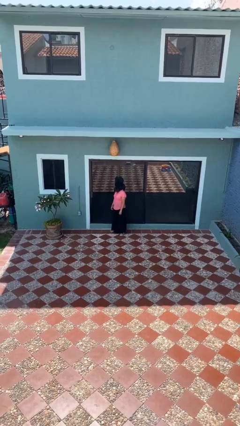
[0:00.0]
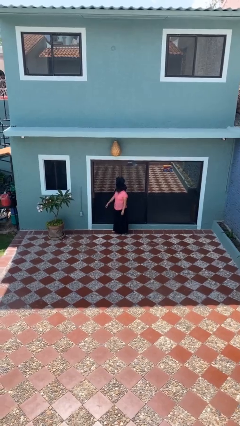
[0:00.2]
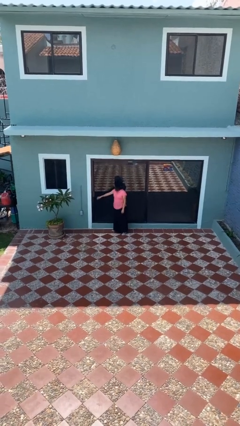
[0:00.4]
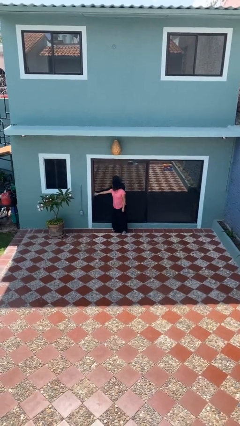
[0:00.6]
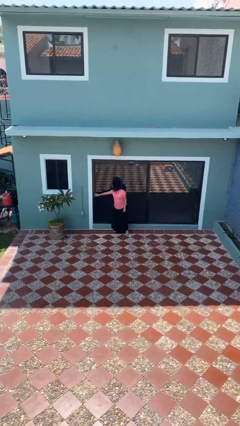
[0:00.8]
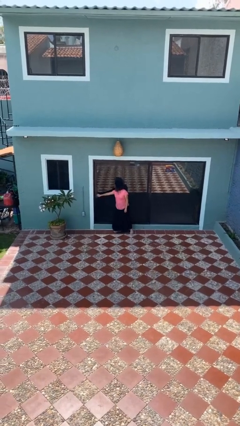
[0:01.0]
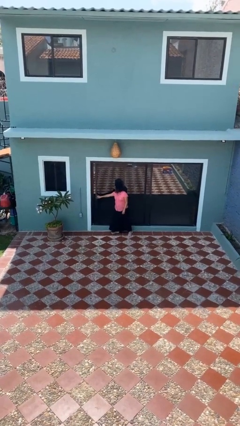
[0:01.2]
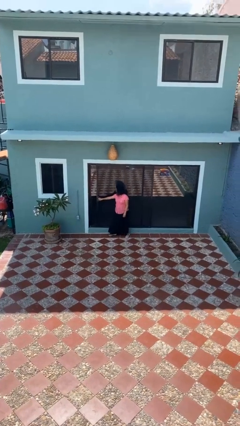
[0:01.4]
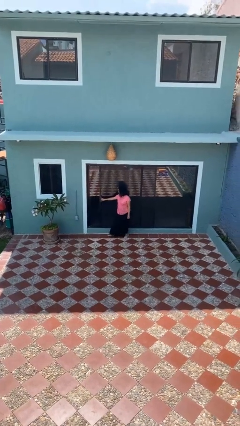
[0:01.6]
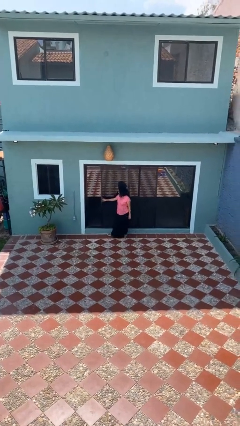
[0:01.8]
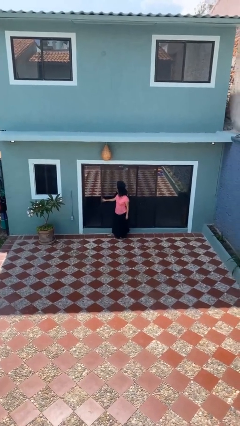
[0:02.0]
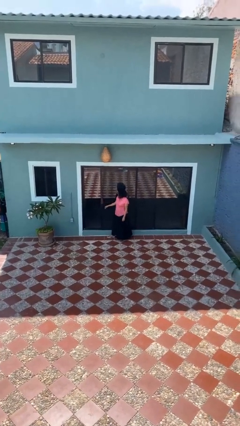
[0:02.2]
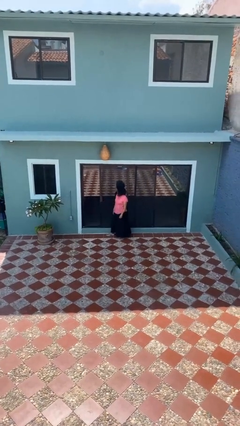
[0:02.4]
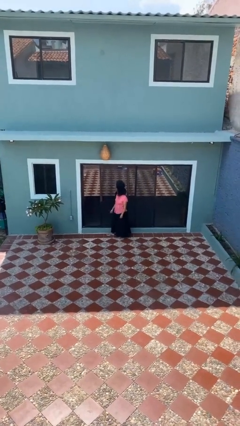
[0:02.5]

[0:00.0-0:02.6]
person opens sliding door

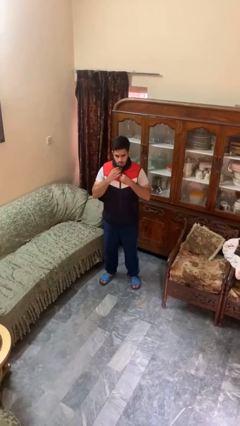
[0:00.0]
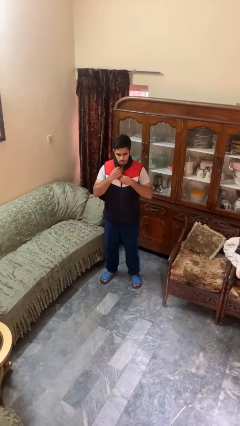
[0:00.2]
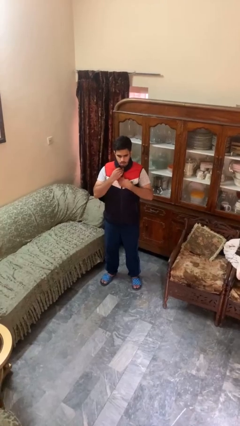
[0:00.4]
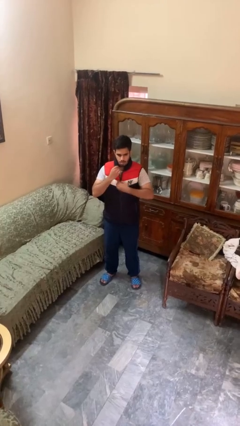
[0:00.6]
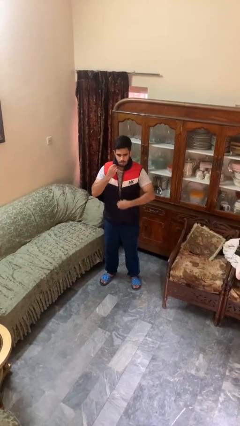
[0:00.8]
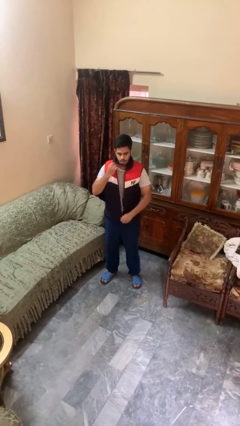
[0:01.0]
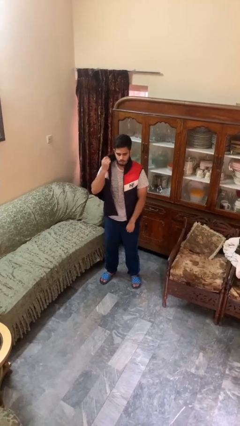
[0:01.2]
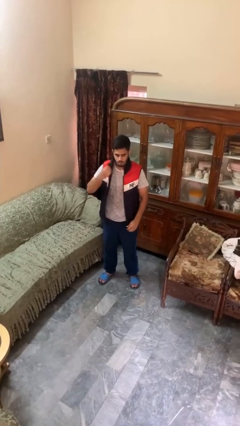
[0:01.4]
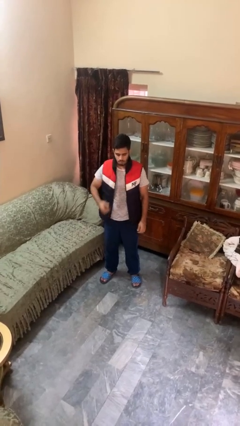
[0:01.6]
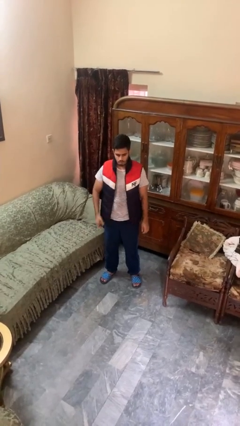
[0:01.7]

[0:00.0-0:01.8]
person unzips jacket

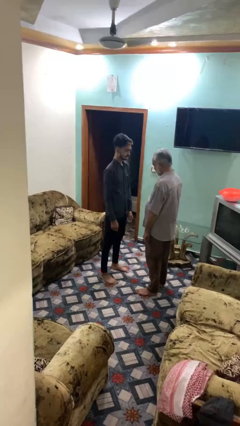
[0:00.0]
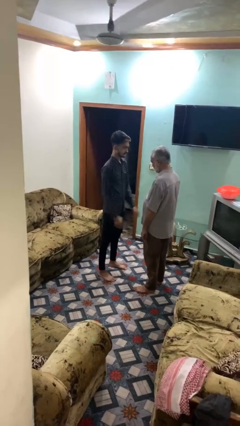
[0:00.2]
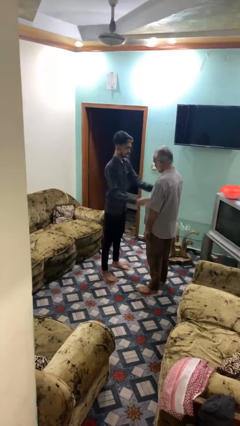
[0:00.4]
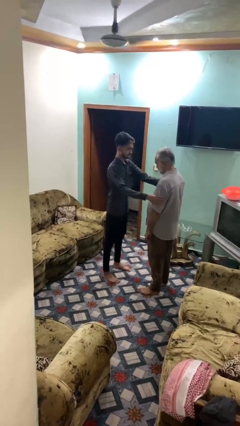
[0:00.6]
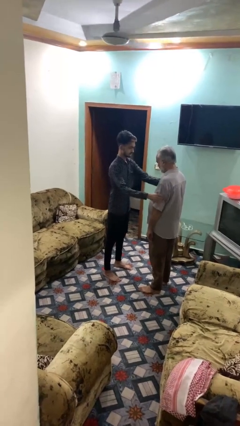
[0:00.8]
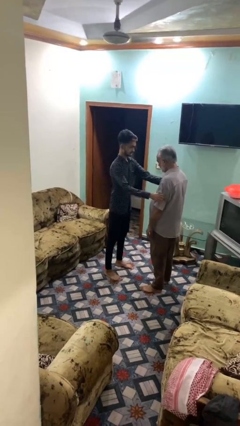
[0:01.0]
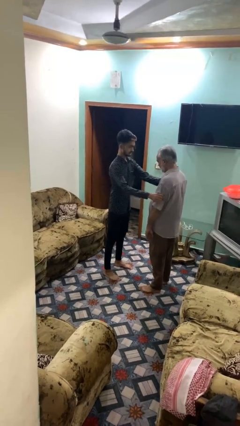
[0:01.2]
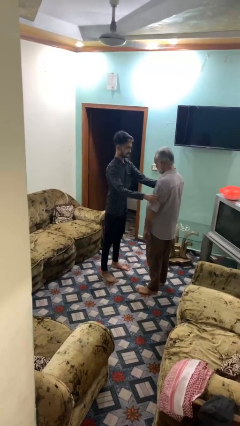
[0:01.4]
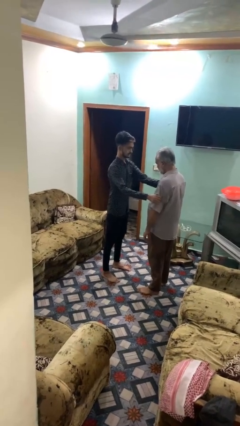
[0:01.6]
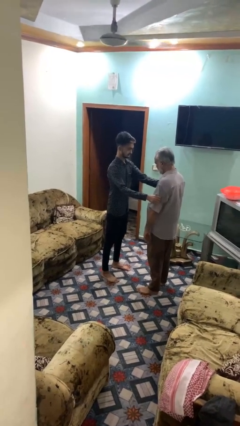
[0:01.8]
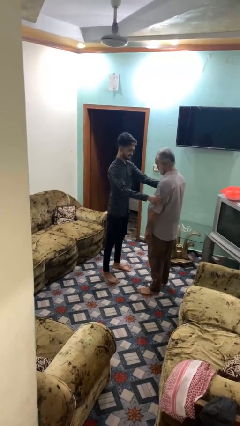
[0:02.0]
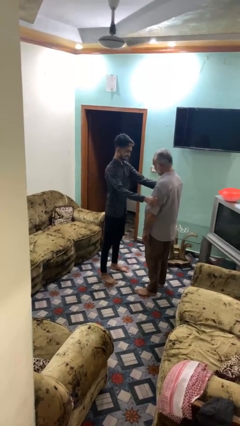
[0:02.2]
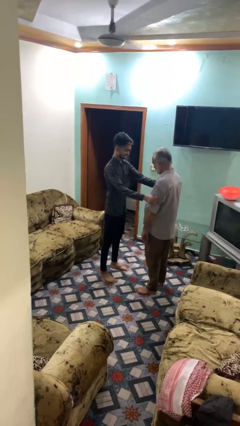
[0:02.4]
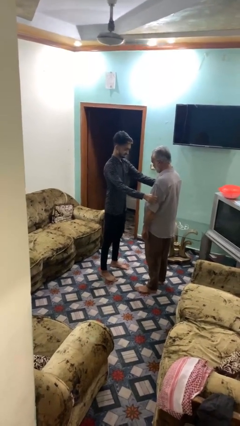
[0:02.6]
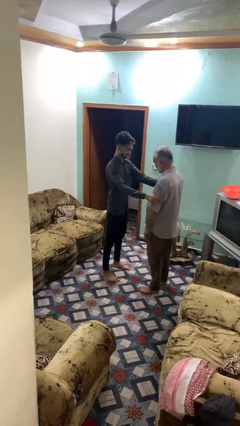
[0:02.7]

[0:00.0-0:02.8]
person grabs person by bicep

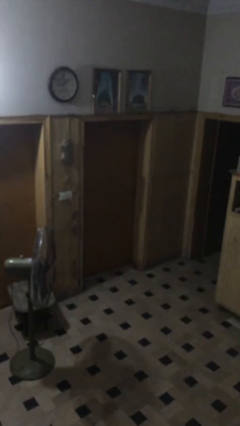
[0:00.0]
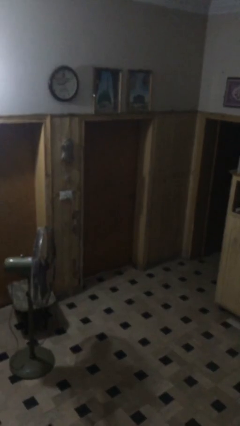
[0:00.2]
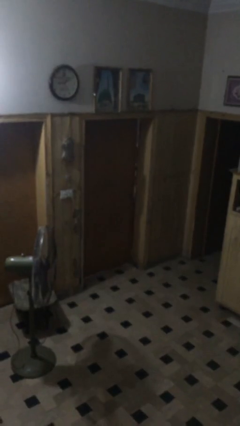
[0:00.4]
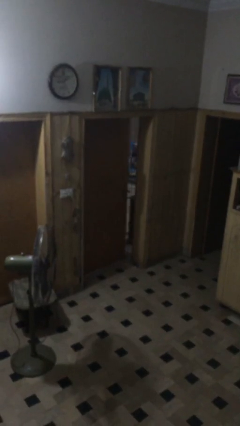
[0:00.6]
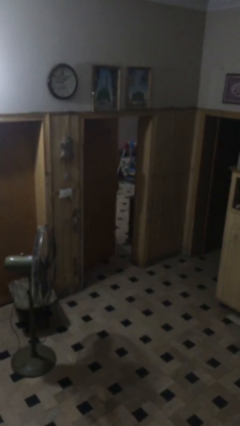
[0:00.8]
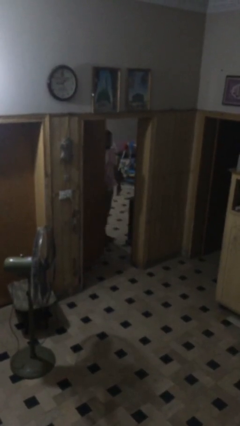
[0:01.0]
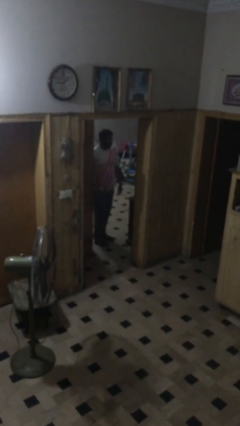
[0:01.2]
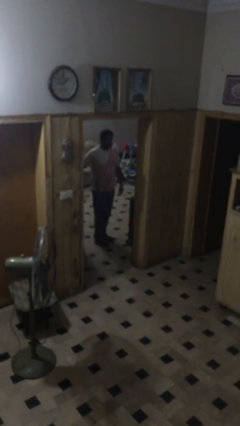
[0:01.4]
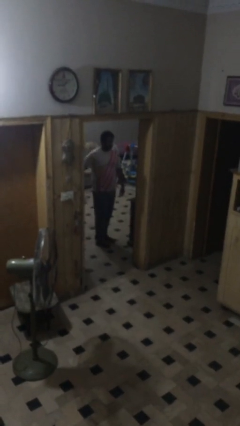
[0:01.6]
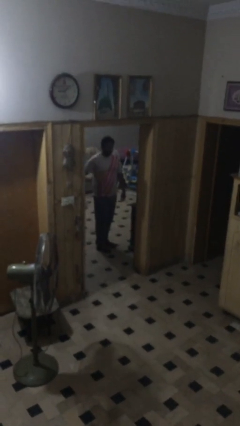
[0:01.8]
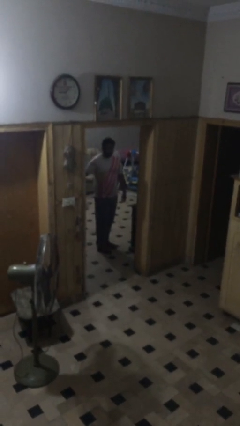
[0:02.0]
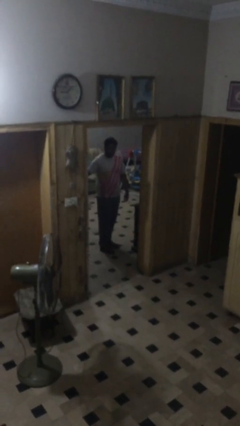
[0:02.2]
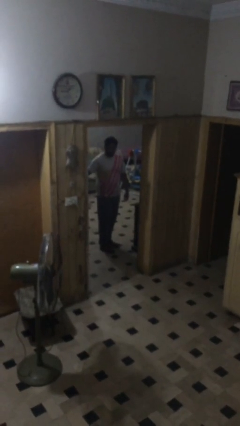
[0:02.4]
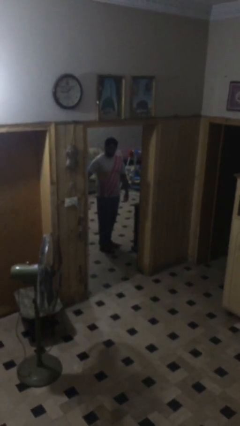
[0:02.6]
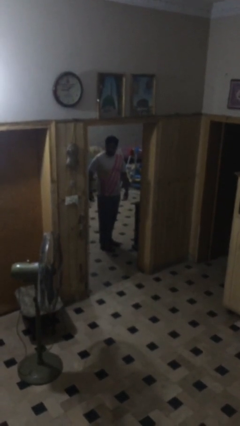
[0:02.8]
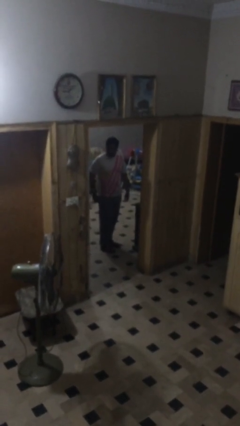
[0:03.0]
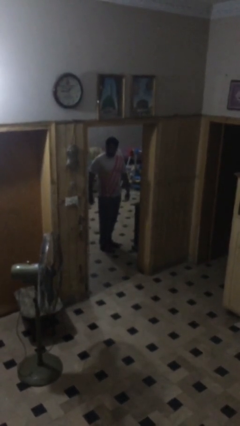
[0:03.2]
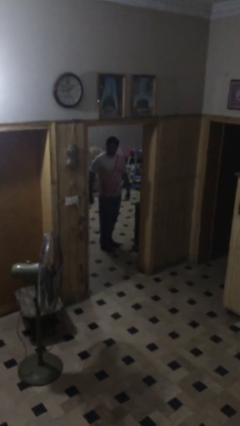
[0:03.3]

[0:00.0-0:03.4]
person opens facility door

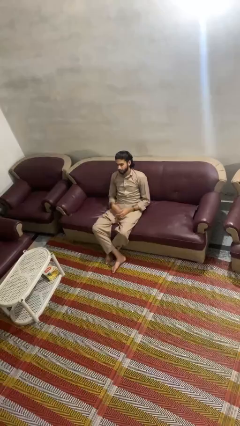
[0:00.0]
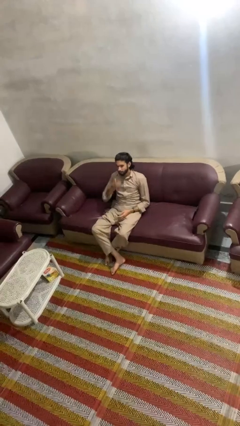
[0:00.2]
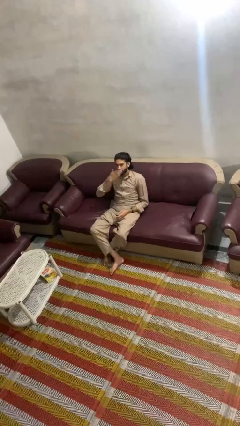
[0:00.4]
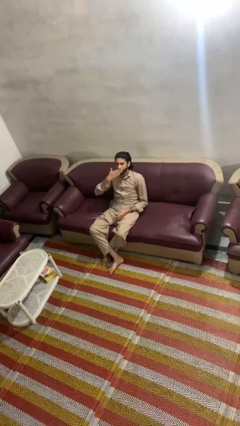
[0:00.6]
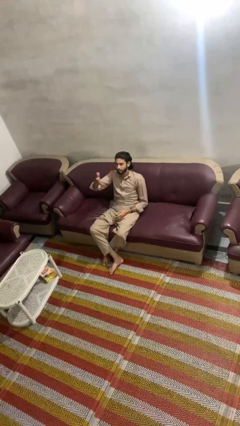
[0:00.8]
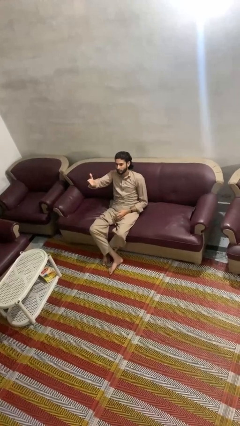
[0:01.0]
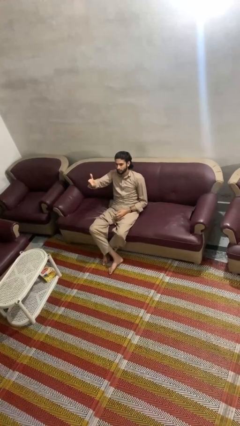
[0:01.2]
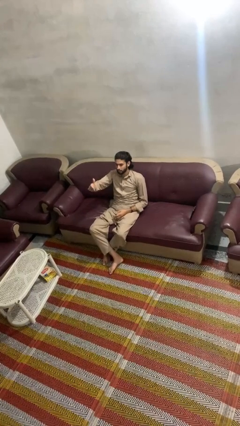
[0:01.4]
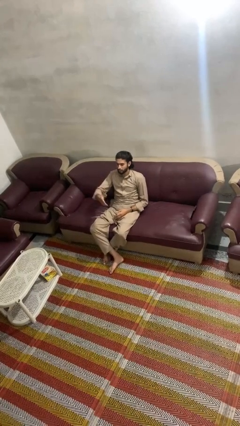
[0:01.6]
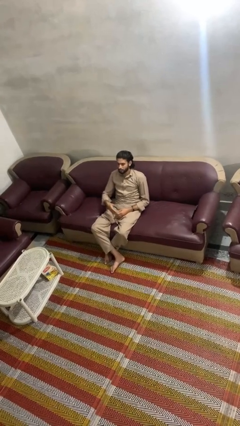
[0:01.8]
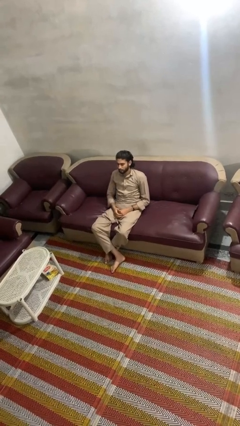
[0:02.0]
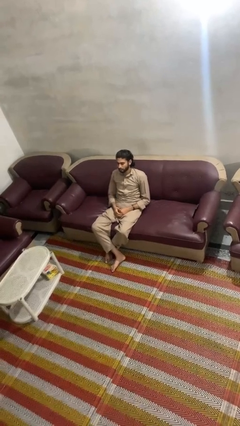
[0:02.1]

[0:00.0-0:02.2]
person gestures blow kiss

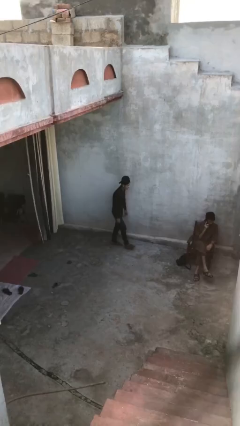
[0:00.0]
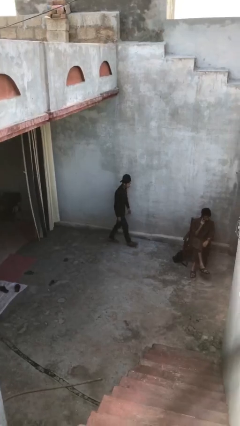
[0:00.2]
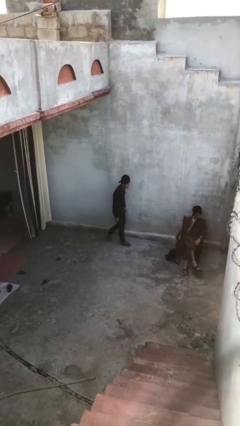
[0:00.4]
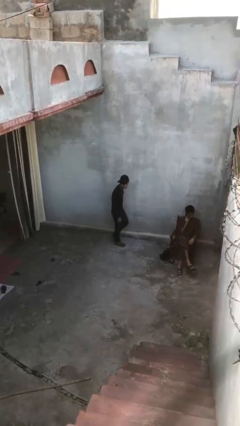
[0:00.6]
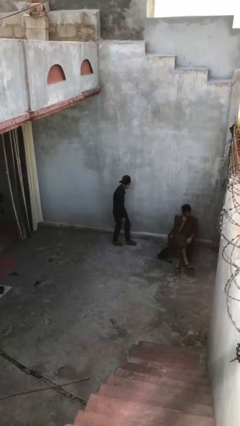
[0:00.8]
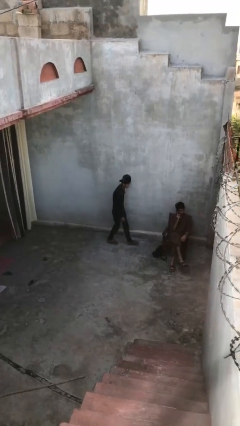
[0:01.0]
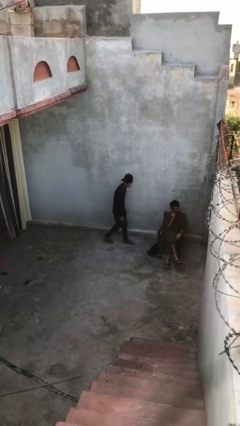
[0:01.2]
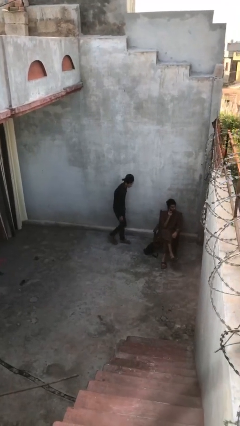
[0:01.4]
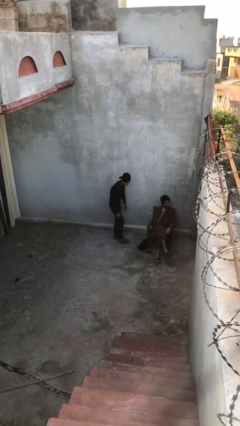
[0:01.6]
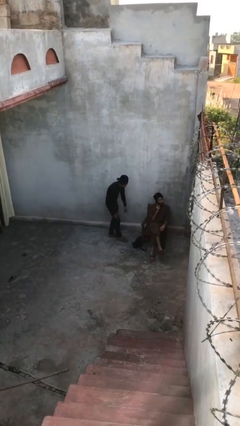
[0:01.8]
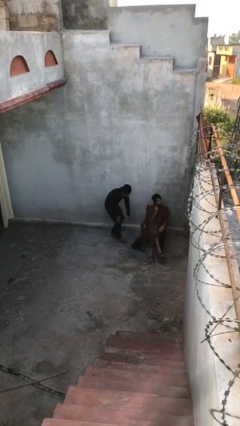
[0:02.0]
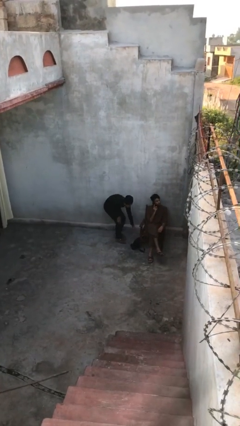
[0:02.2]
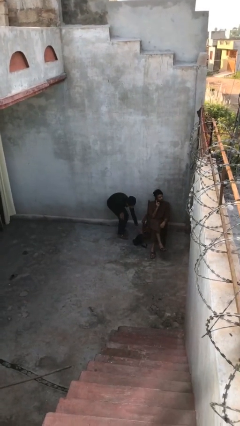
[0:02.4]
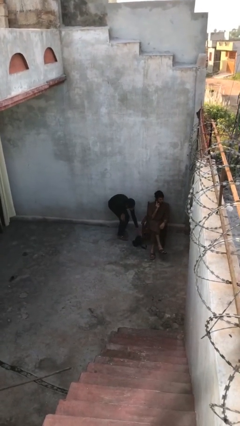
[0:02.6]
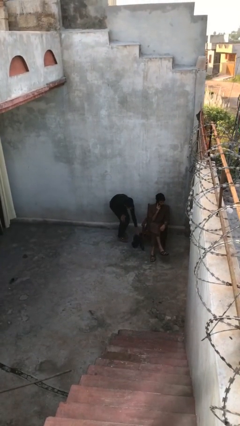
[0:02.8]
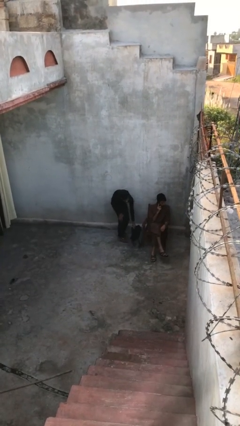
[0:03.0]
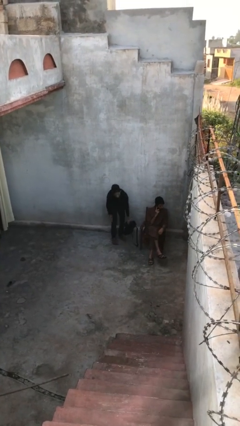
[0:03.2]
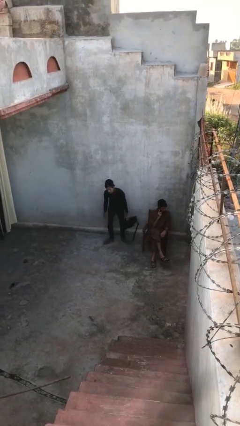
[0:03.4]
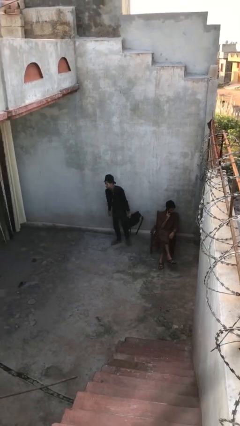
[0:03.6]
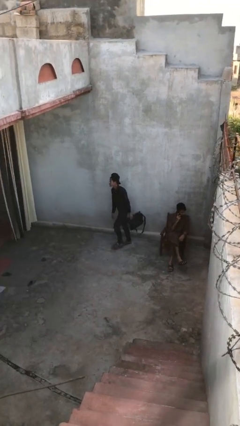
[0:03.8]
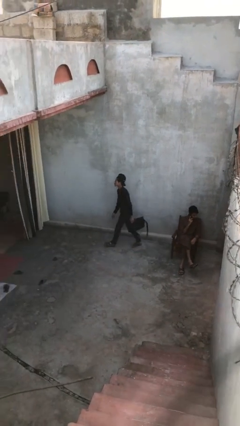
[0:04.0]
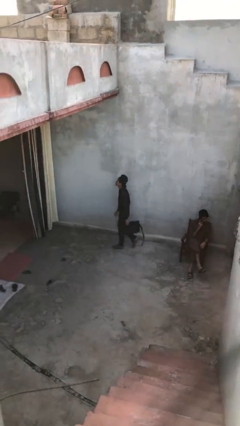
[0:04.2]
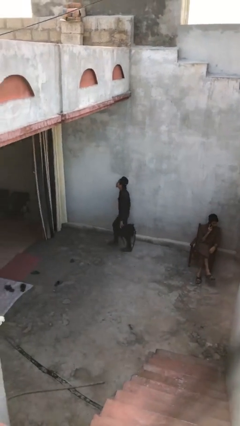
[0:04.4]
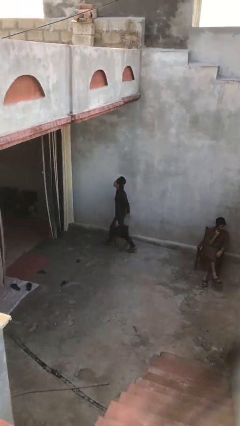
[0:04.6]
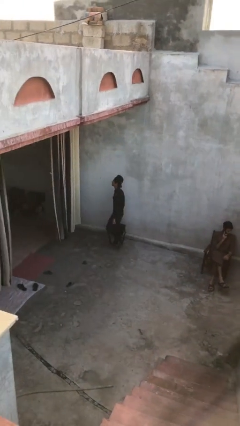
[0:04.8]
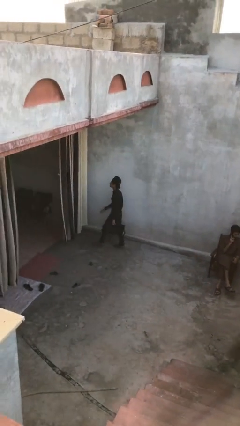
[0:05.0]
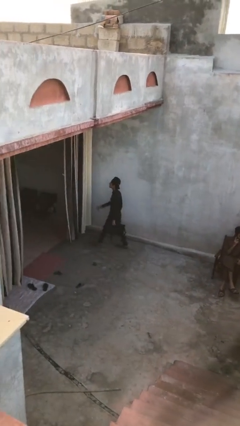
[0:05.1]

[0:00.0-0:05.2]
person steals object from person
